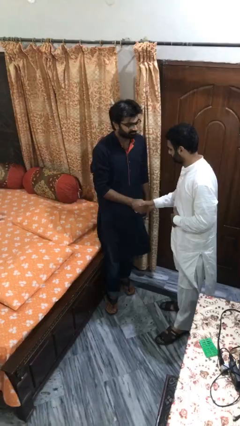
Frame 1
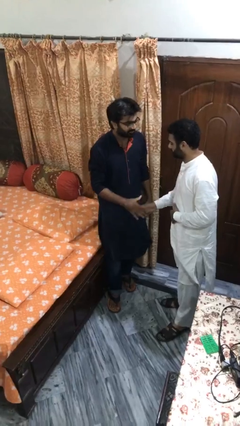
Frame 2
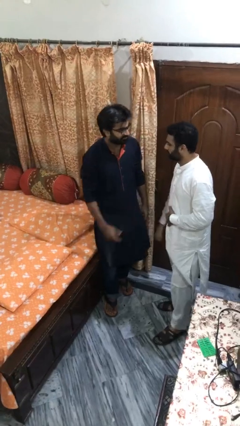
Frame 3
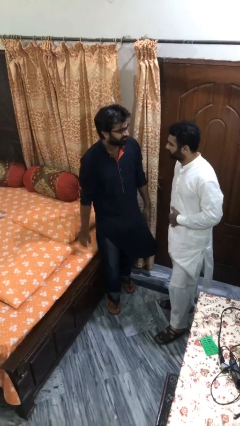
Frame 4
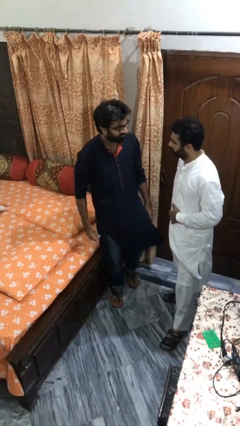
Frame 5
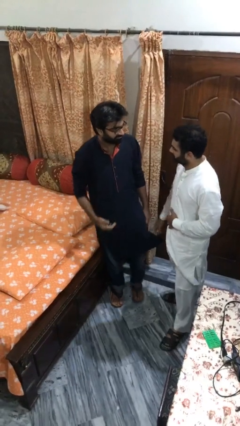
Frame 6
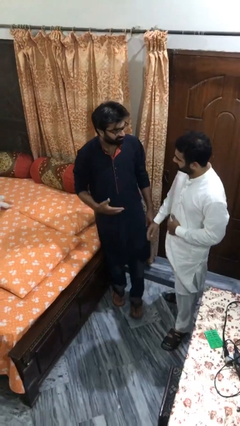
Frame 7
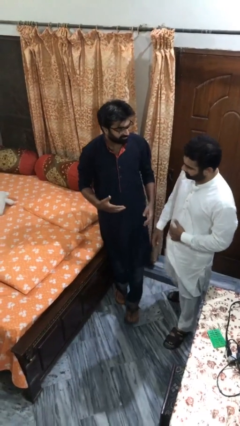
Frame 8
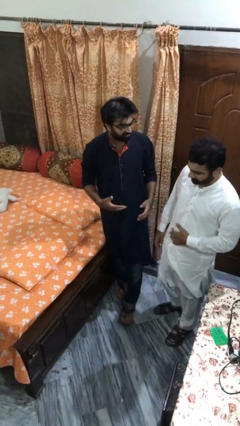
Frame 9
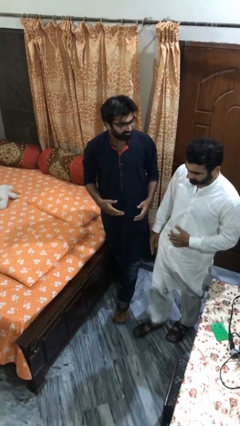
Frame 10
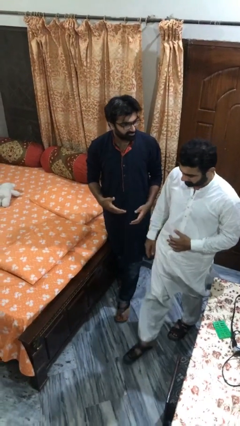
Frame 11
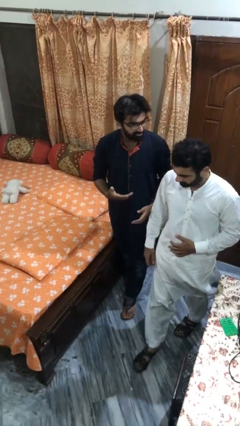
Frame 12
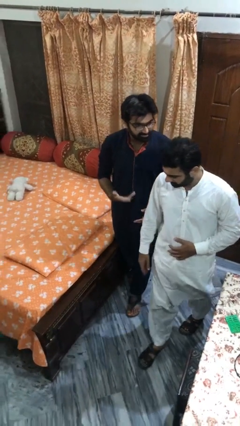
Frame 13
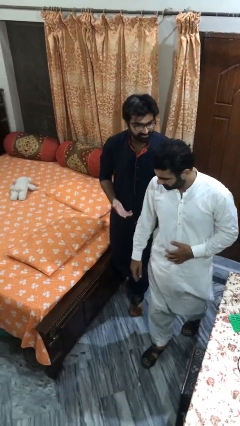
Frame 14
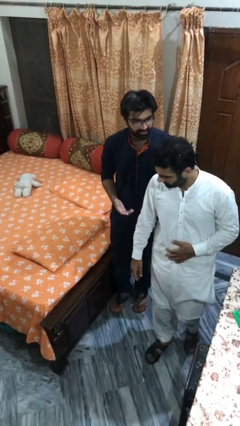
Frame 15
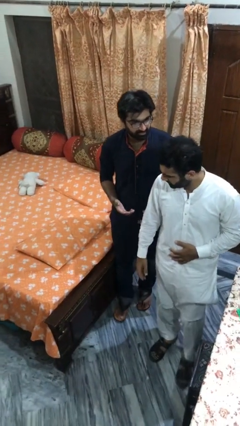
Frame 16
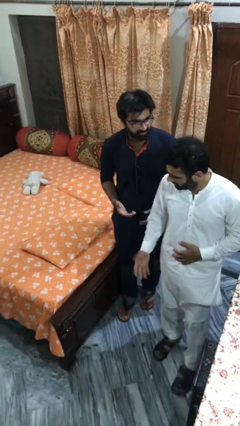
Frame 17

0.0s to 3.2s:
person talks to person

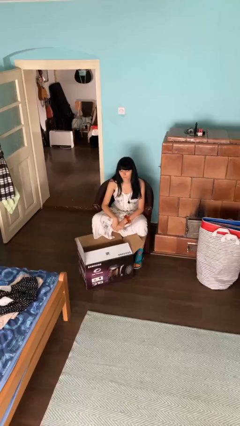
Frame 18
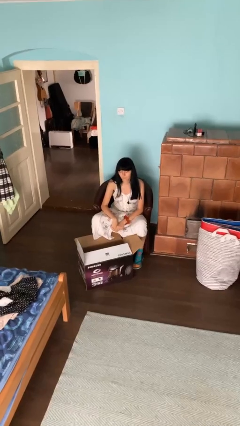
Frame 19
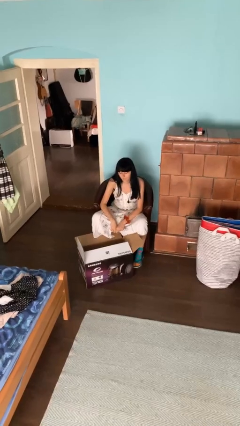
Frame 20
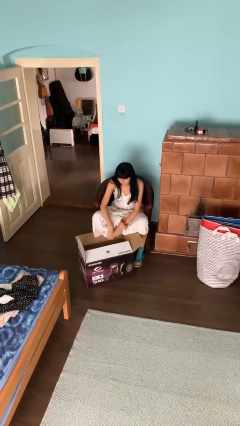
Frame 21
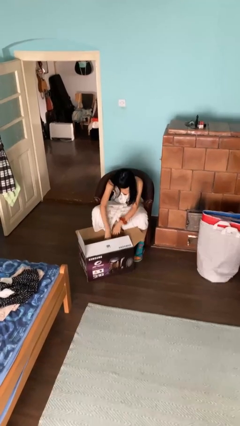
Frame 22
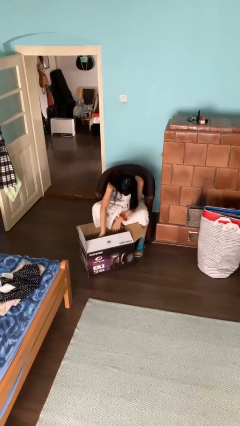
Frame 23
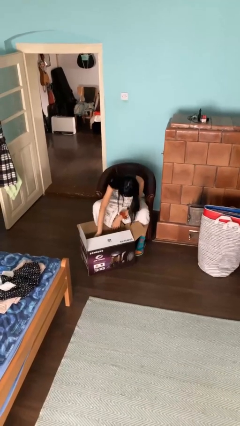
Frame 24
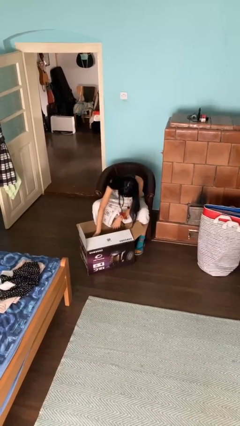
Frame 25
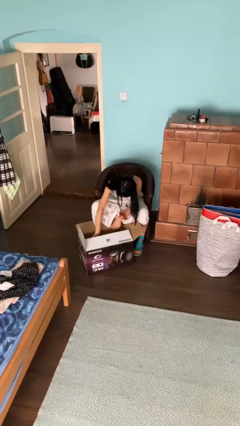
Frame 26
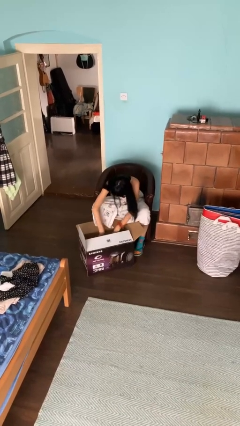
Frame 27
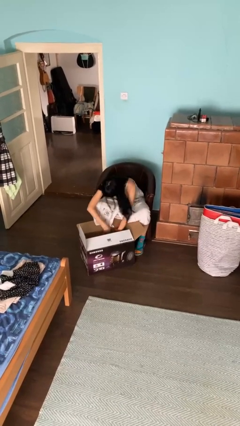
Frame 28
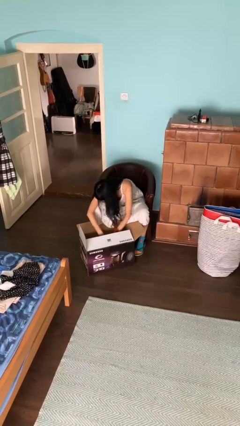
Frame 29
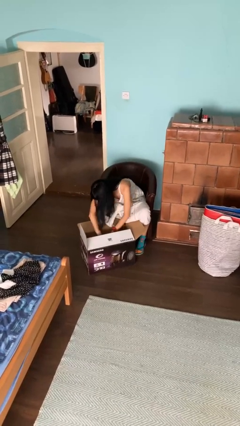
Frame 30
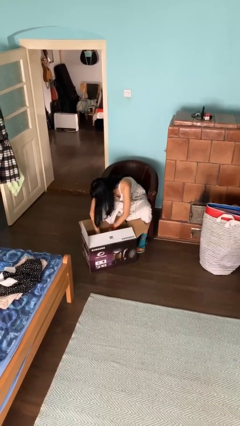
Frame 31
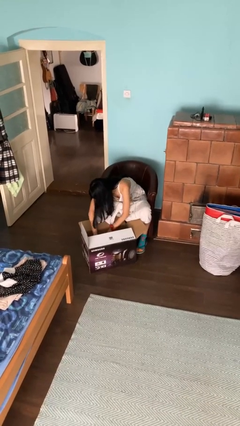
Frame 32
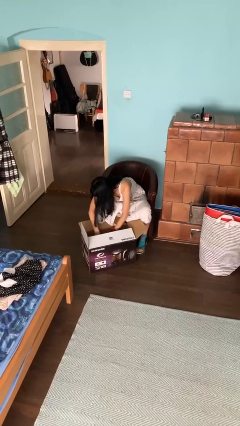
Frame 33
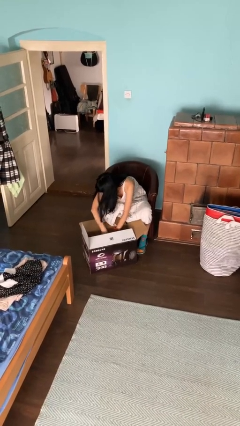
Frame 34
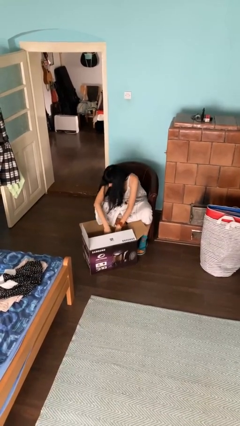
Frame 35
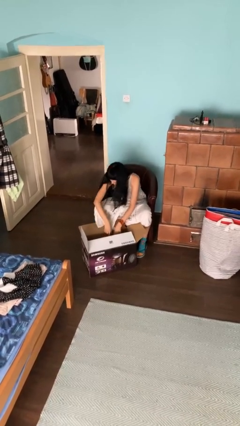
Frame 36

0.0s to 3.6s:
person searches in box

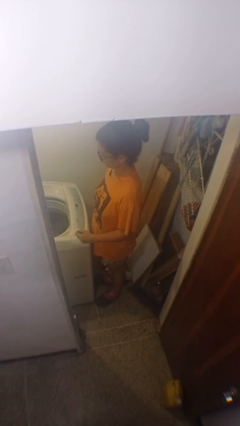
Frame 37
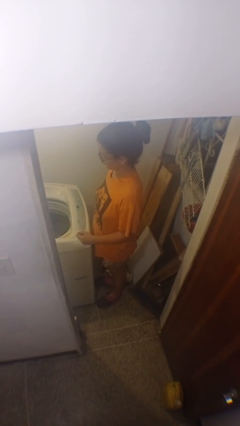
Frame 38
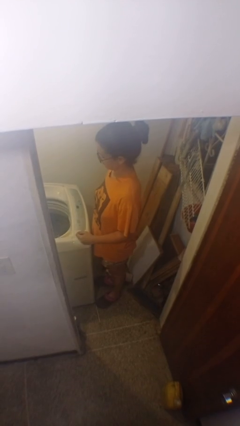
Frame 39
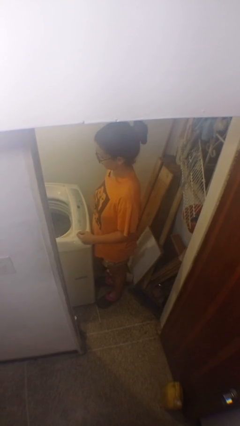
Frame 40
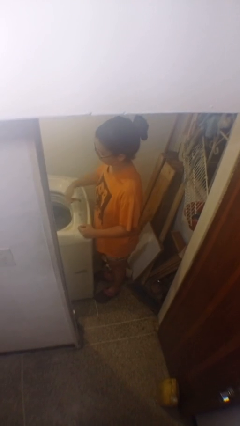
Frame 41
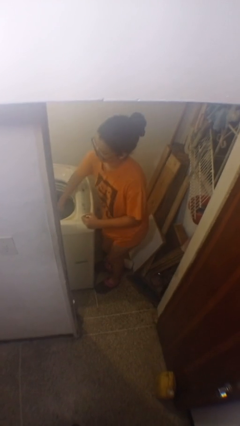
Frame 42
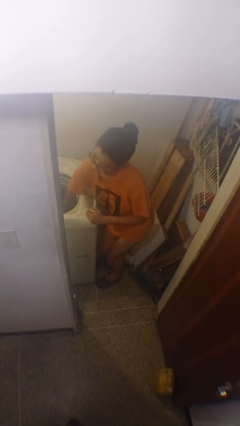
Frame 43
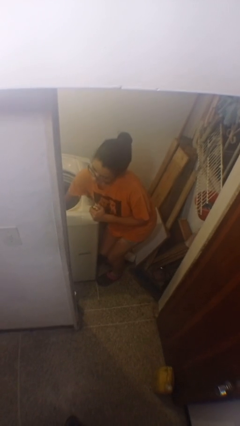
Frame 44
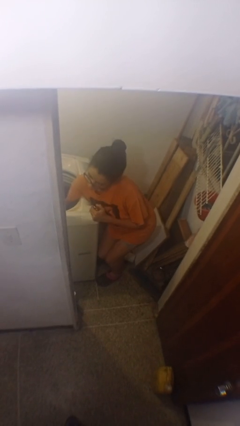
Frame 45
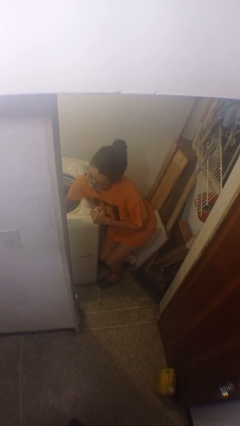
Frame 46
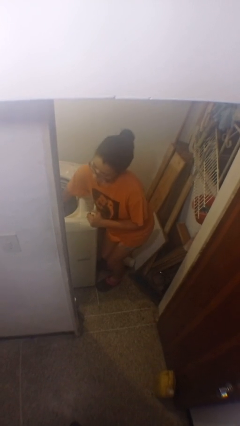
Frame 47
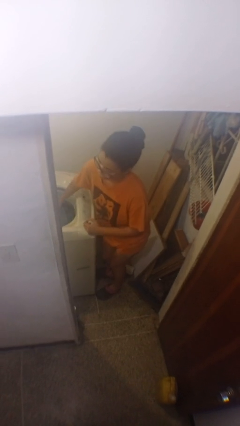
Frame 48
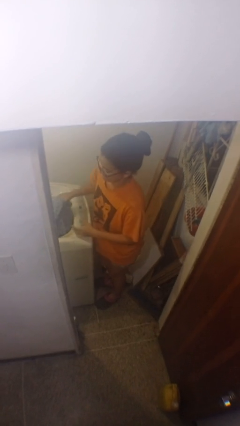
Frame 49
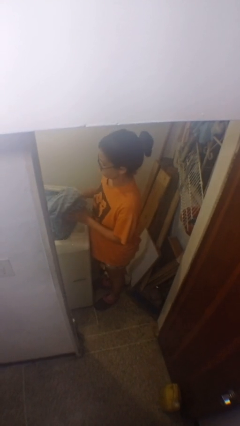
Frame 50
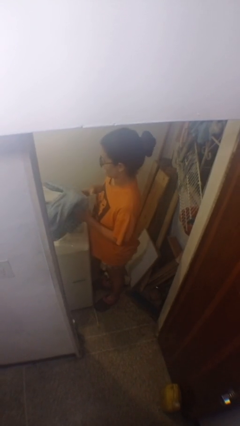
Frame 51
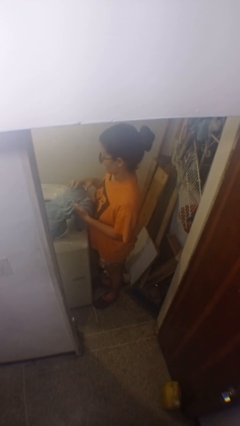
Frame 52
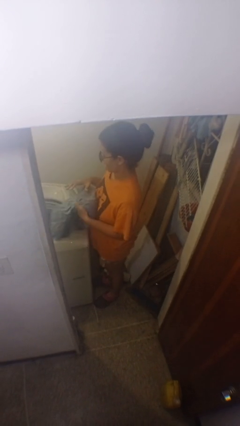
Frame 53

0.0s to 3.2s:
person unloads clotheswasher

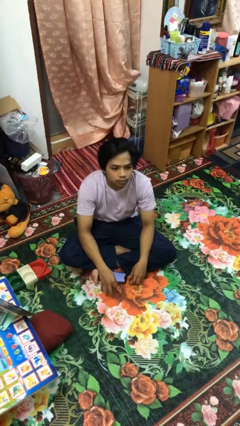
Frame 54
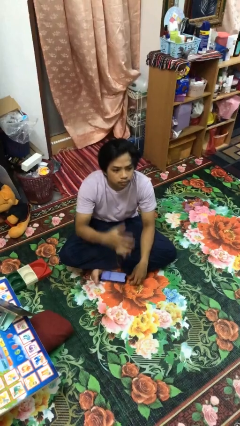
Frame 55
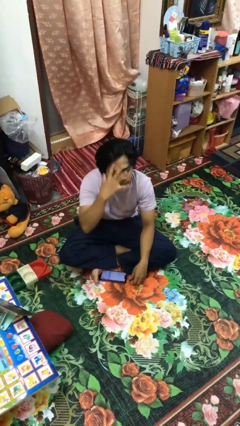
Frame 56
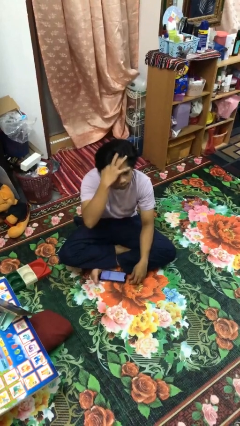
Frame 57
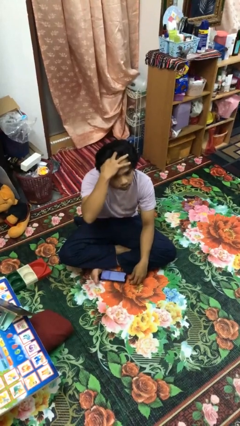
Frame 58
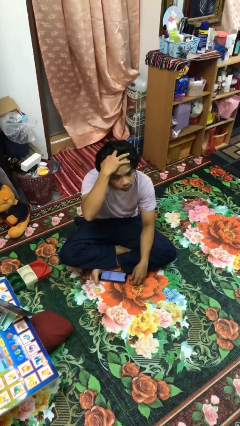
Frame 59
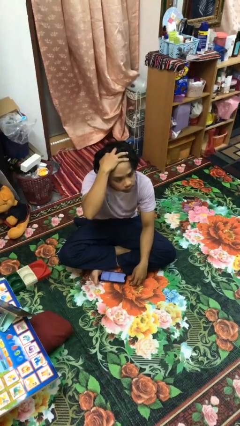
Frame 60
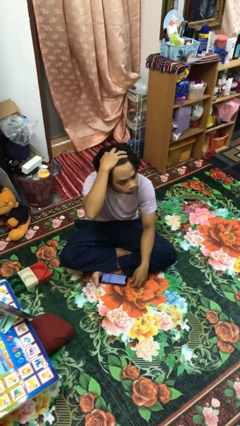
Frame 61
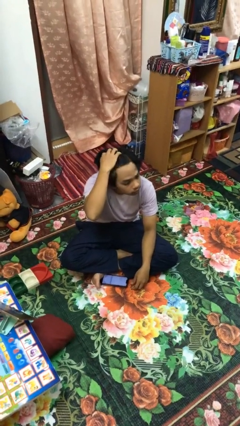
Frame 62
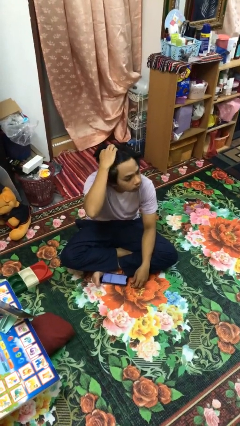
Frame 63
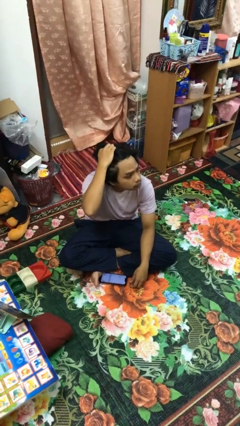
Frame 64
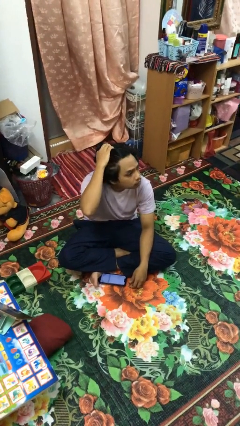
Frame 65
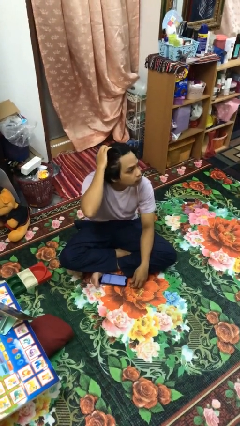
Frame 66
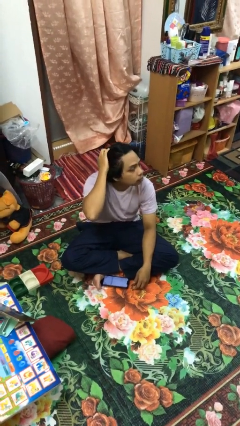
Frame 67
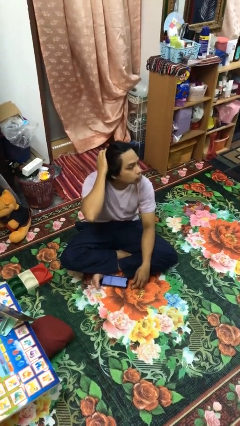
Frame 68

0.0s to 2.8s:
person strokes hair

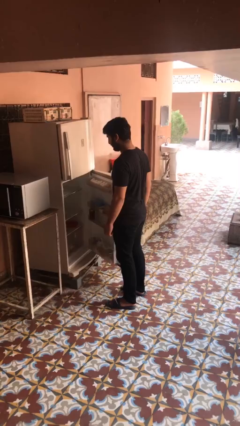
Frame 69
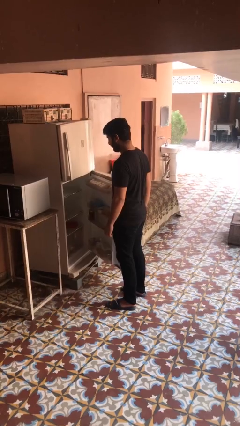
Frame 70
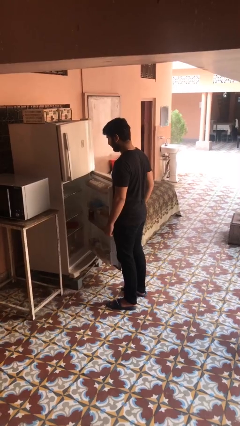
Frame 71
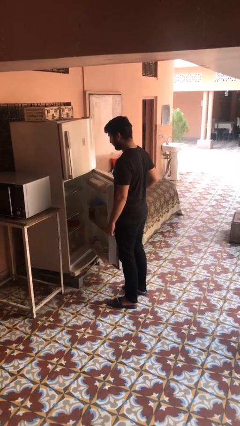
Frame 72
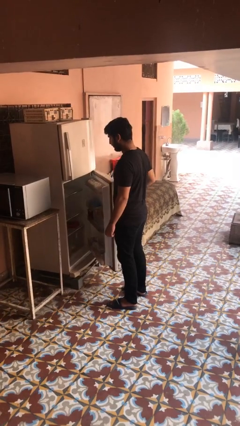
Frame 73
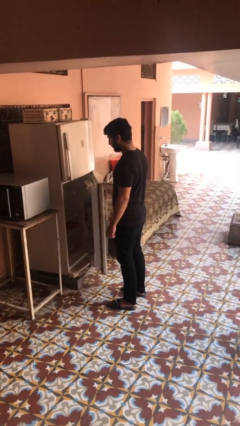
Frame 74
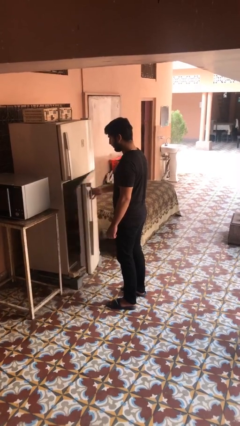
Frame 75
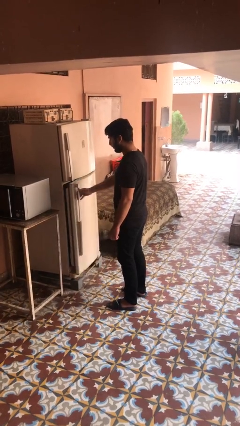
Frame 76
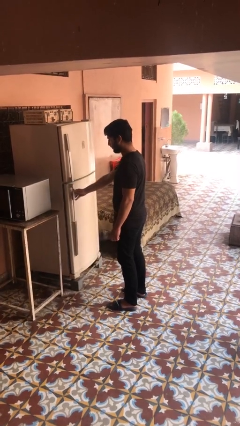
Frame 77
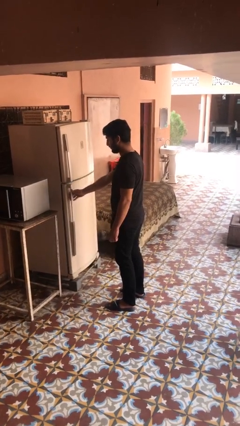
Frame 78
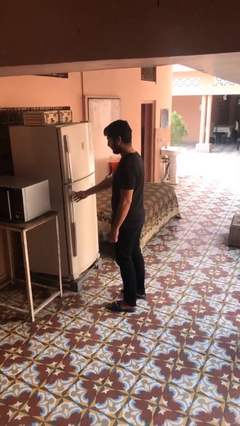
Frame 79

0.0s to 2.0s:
person closes refrigerator

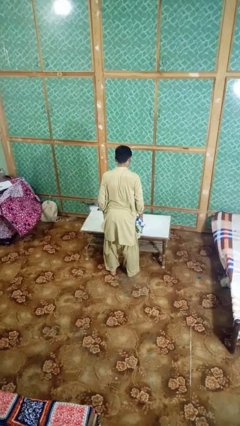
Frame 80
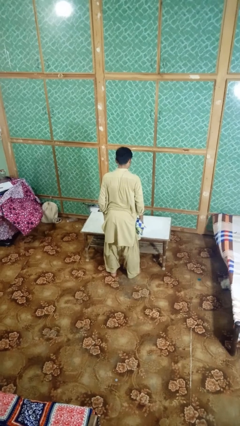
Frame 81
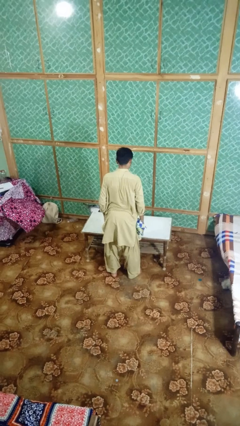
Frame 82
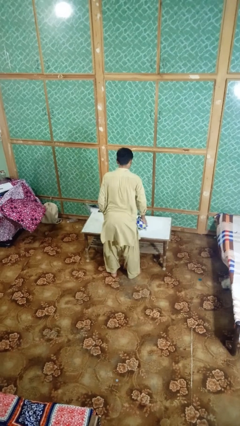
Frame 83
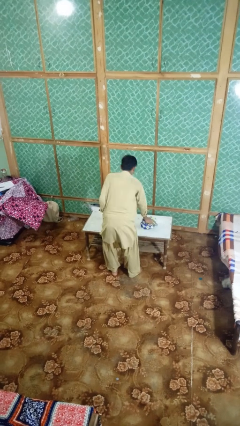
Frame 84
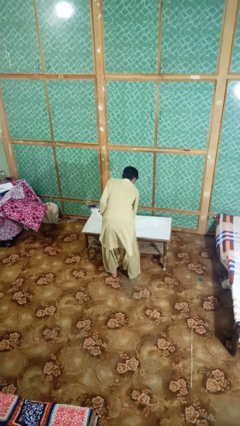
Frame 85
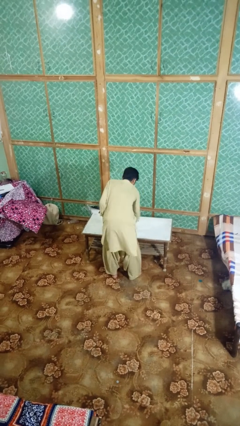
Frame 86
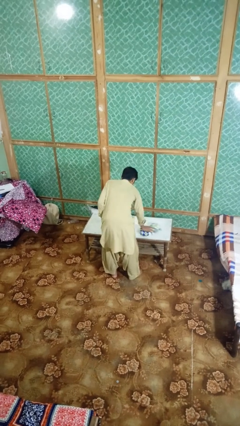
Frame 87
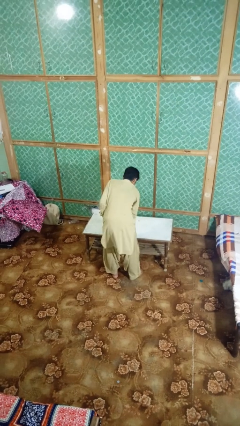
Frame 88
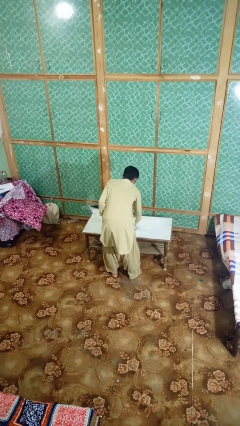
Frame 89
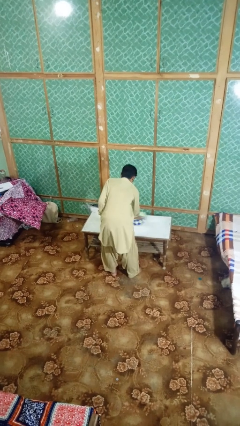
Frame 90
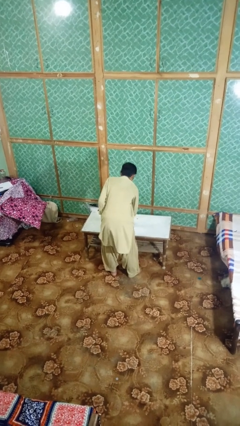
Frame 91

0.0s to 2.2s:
person cleans table with rag

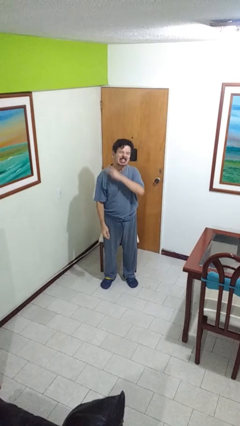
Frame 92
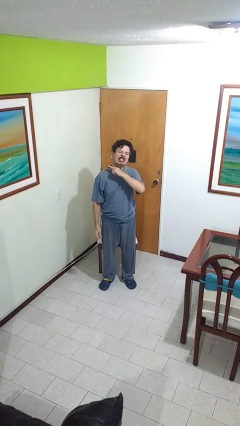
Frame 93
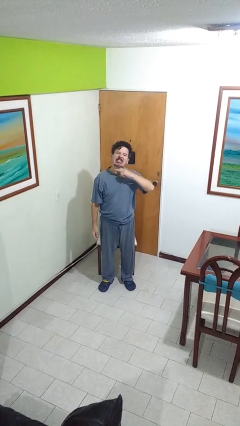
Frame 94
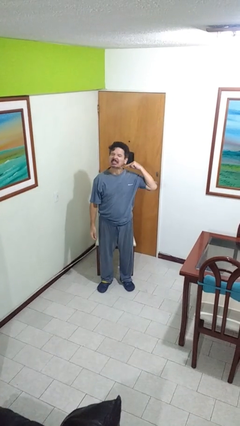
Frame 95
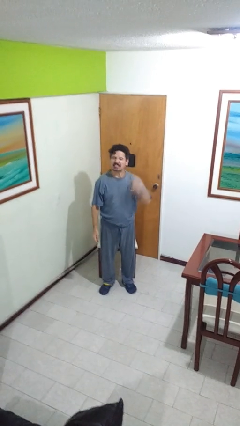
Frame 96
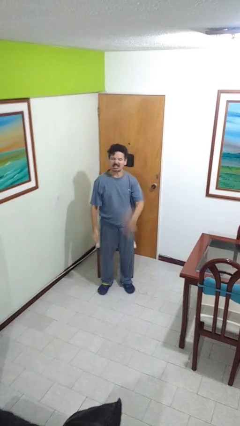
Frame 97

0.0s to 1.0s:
person gestures cut
